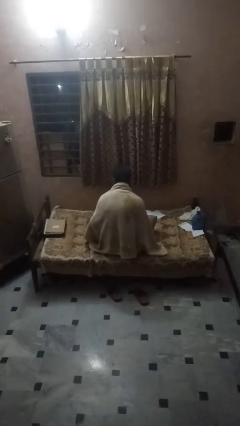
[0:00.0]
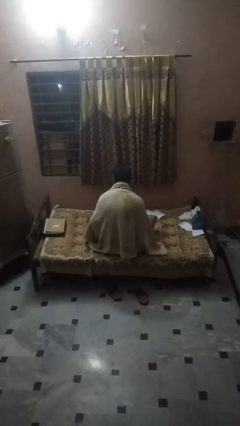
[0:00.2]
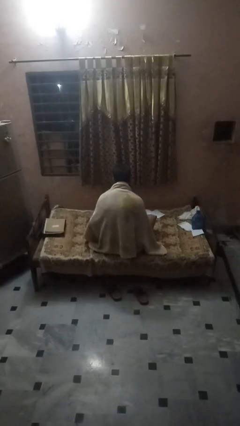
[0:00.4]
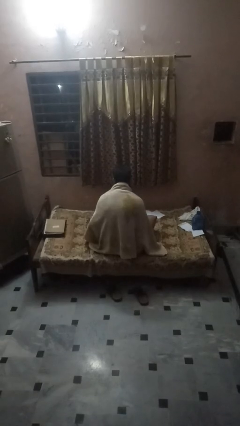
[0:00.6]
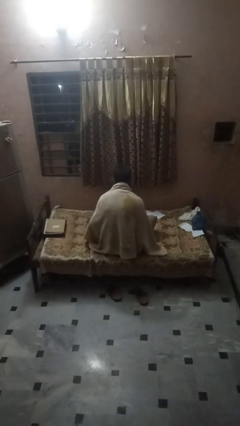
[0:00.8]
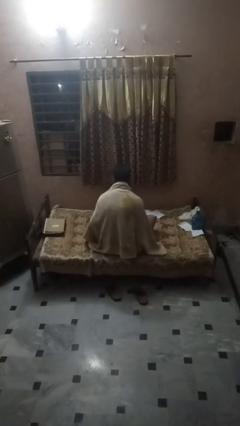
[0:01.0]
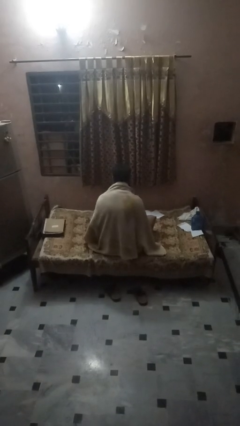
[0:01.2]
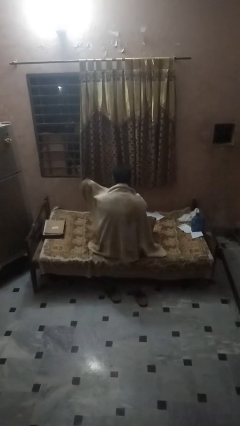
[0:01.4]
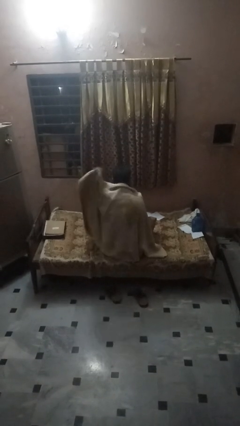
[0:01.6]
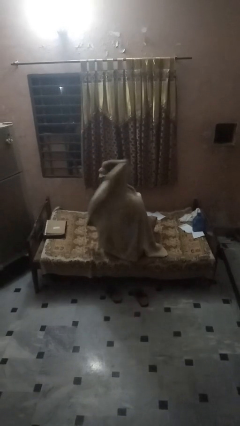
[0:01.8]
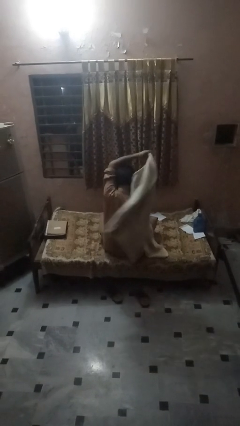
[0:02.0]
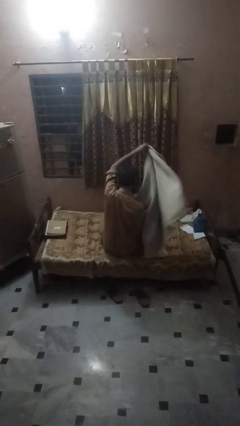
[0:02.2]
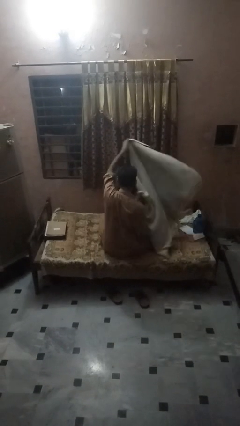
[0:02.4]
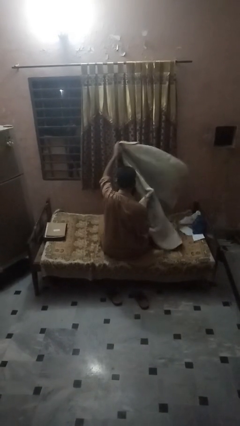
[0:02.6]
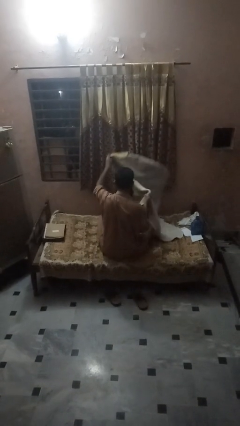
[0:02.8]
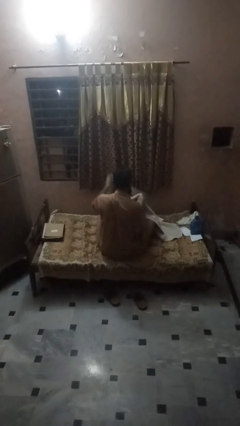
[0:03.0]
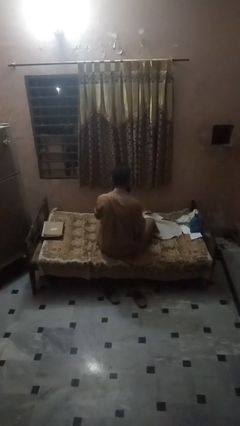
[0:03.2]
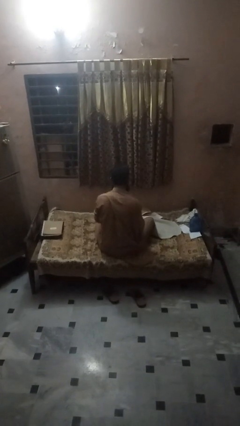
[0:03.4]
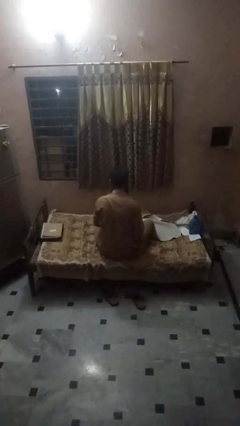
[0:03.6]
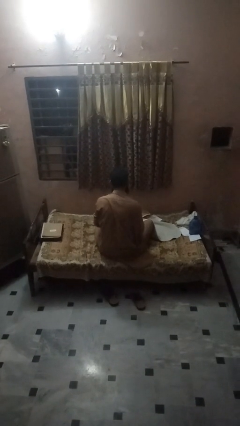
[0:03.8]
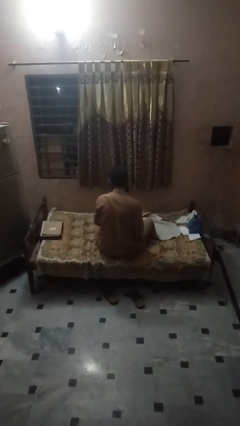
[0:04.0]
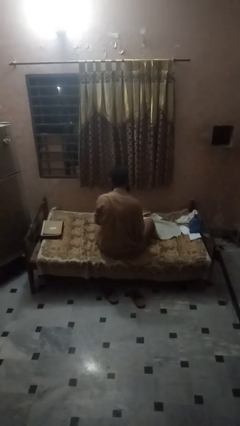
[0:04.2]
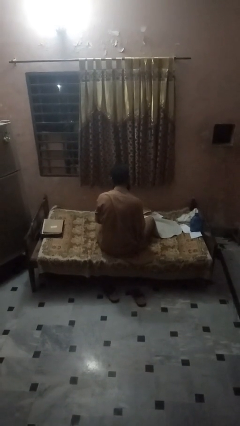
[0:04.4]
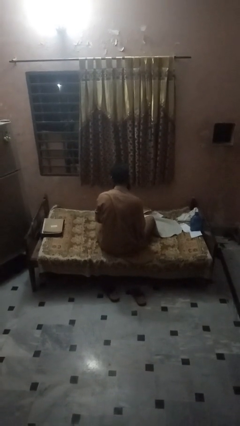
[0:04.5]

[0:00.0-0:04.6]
person uncovers with blanket

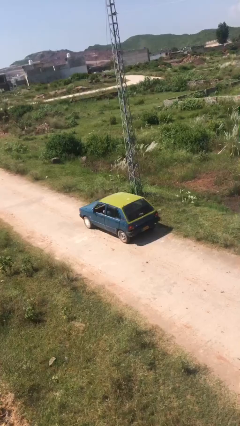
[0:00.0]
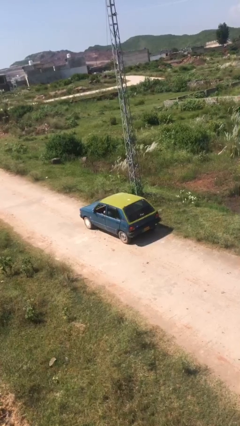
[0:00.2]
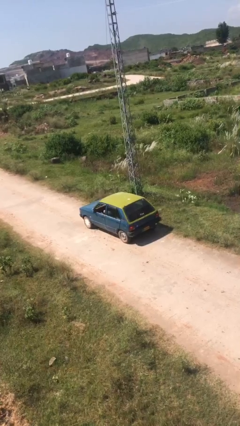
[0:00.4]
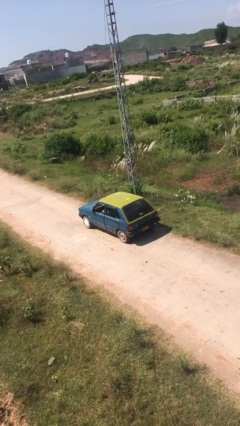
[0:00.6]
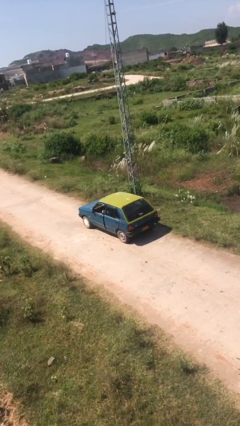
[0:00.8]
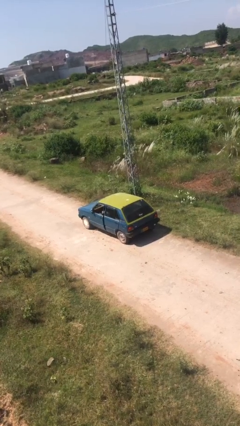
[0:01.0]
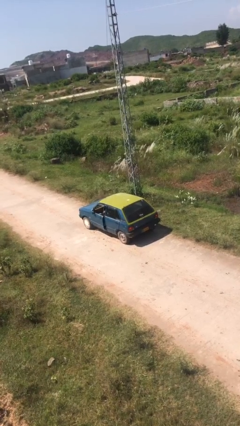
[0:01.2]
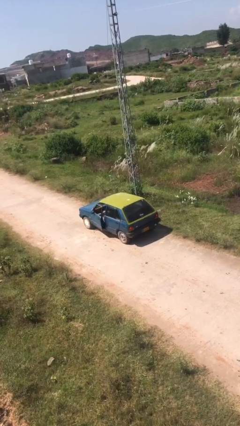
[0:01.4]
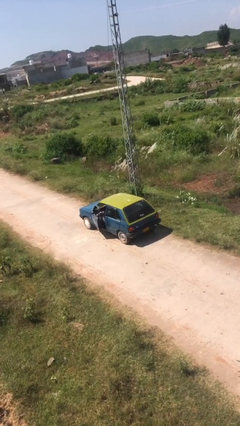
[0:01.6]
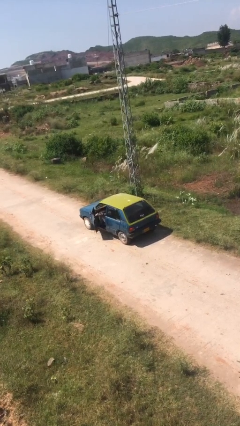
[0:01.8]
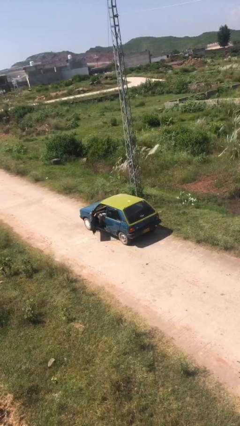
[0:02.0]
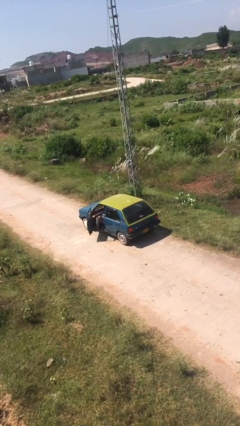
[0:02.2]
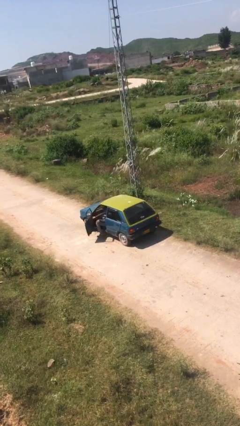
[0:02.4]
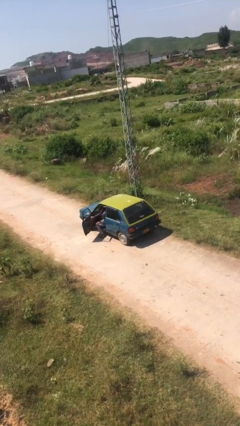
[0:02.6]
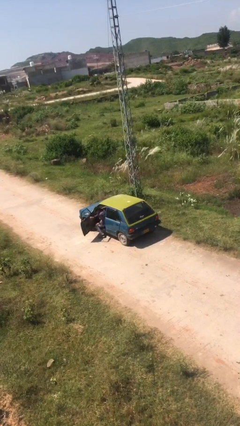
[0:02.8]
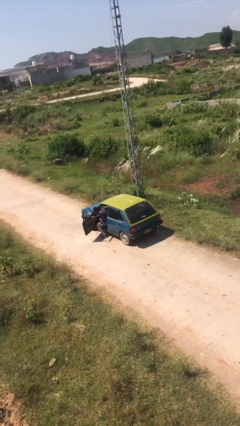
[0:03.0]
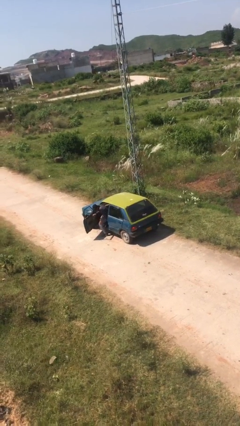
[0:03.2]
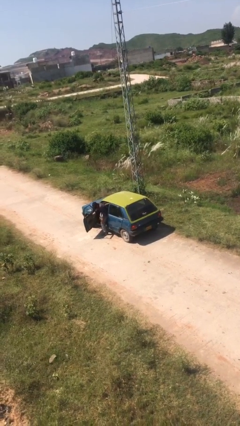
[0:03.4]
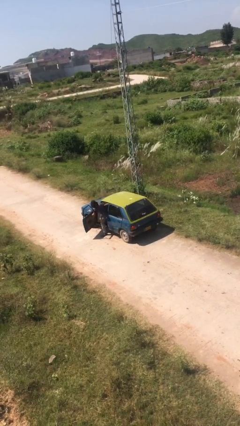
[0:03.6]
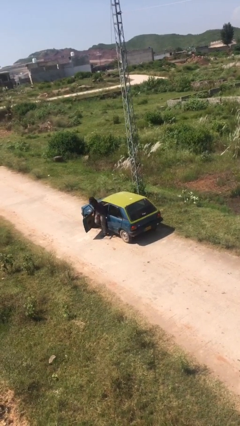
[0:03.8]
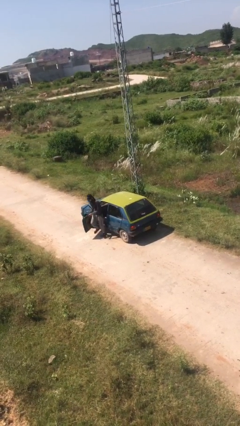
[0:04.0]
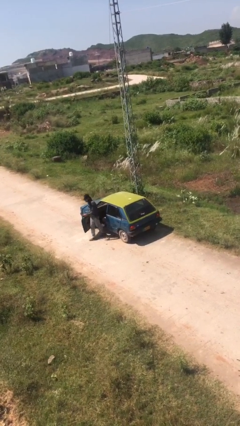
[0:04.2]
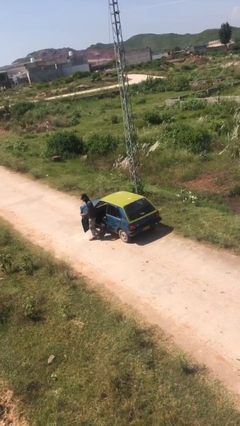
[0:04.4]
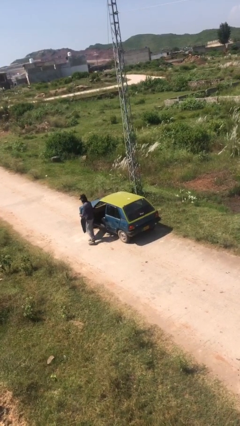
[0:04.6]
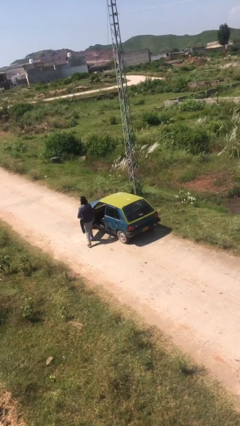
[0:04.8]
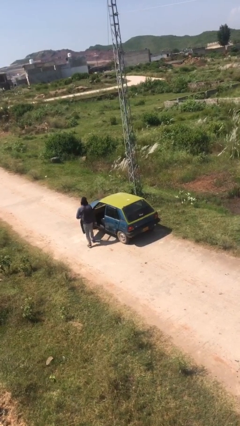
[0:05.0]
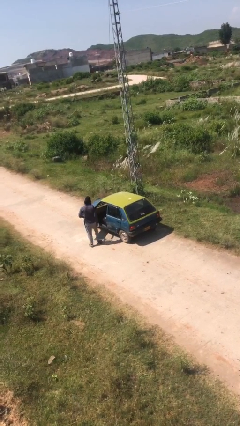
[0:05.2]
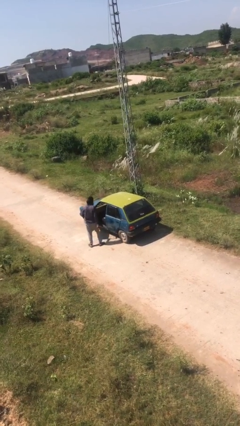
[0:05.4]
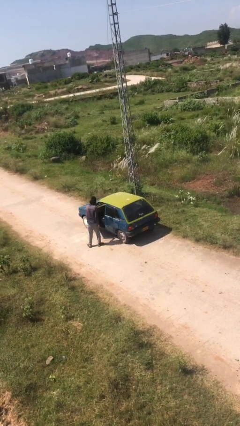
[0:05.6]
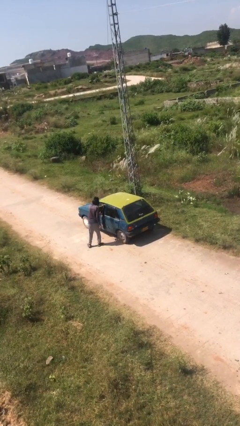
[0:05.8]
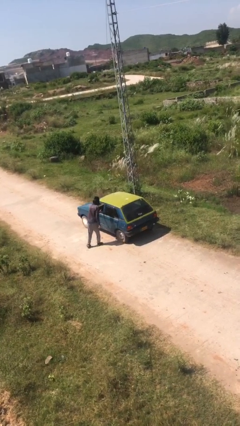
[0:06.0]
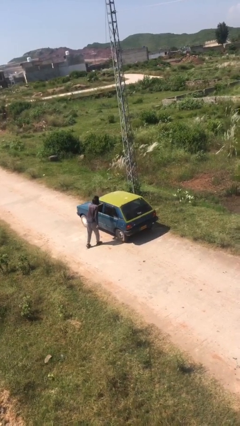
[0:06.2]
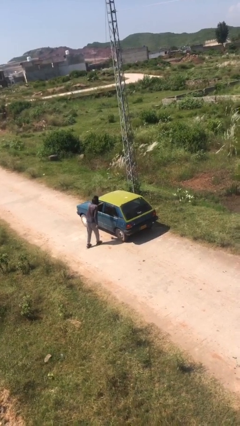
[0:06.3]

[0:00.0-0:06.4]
car drops off person

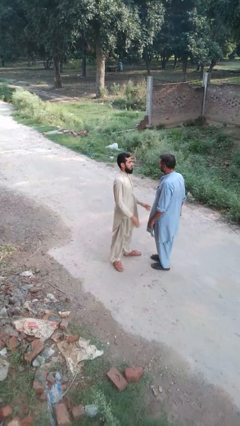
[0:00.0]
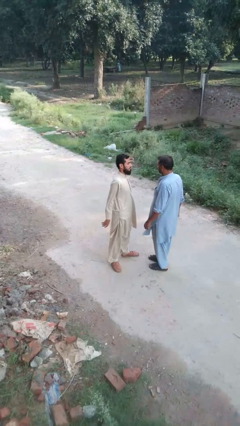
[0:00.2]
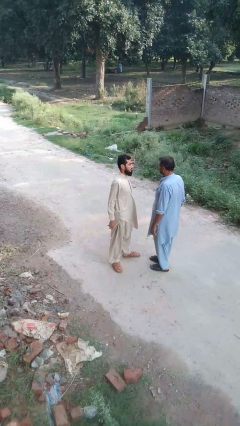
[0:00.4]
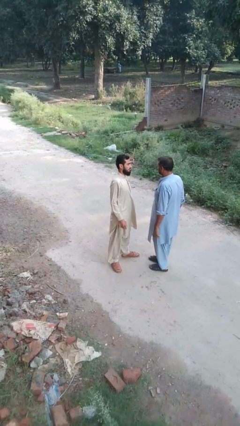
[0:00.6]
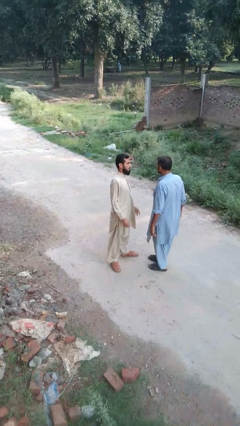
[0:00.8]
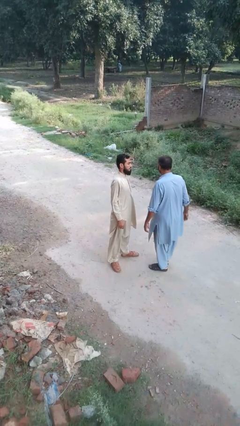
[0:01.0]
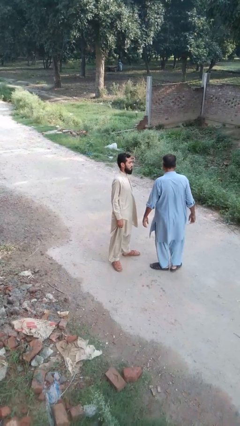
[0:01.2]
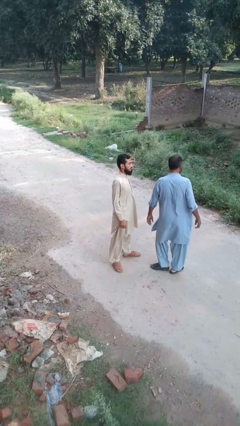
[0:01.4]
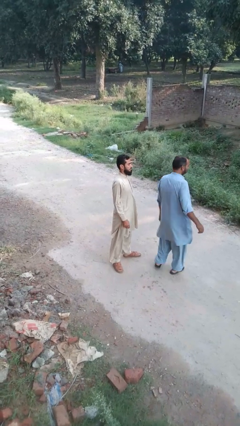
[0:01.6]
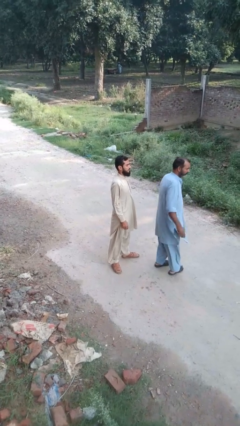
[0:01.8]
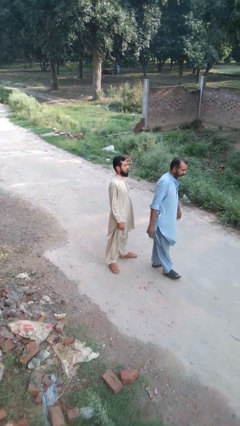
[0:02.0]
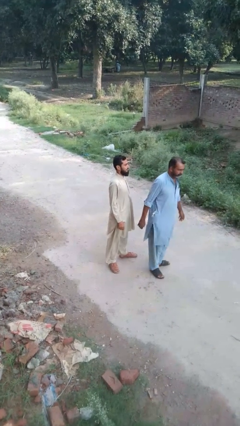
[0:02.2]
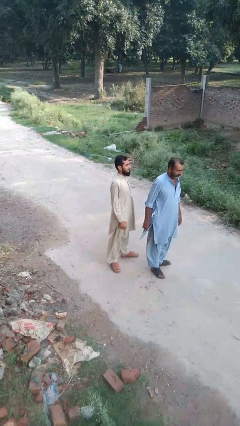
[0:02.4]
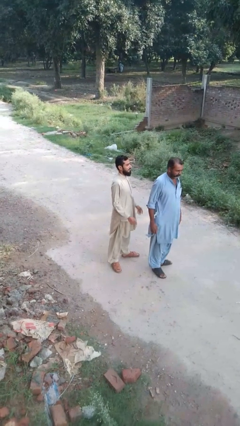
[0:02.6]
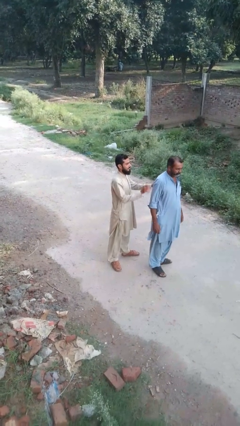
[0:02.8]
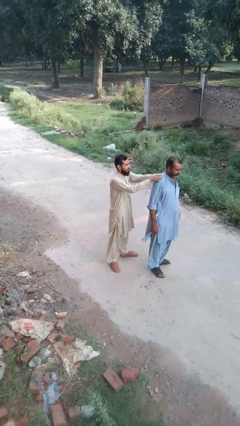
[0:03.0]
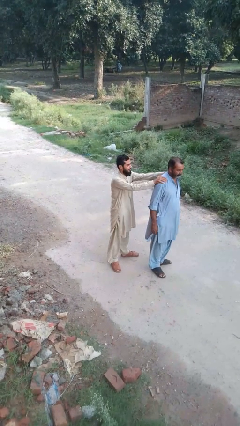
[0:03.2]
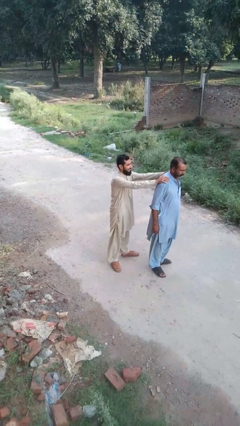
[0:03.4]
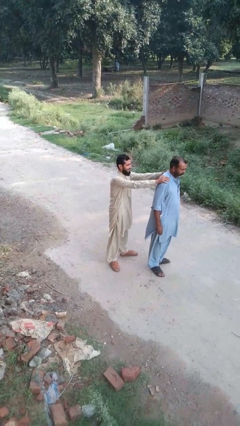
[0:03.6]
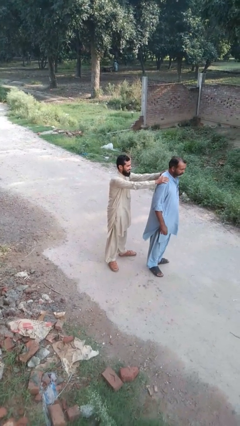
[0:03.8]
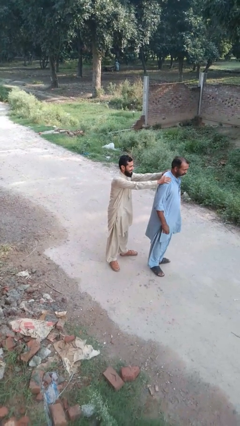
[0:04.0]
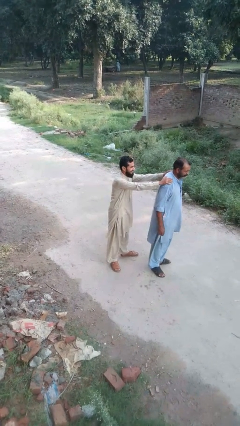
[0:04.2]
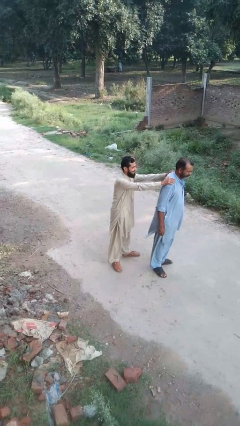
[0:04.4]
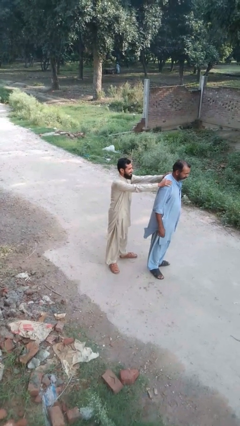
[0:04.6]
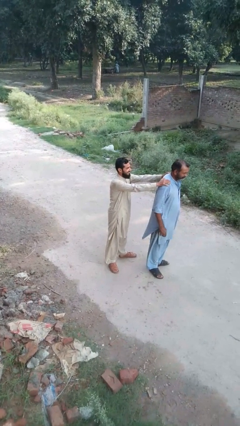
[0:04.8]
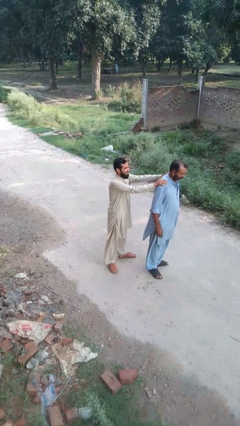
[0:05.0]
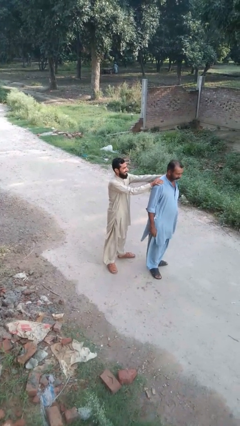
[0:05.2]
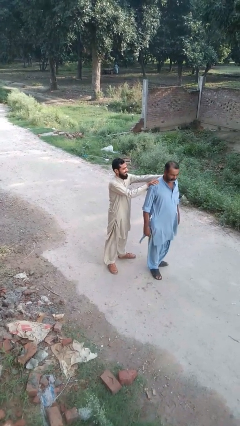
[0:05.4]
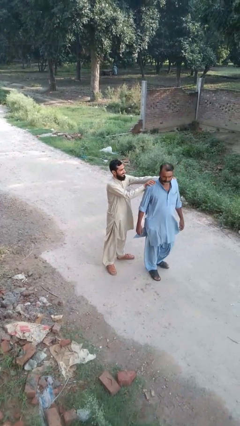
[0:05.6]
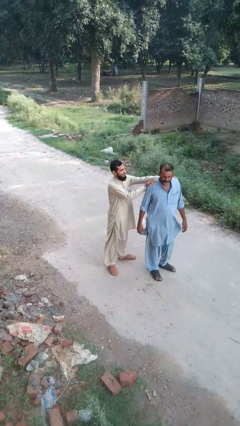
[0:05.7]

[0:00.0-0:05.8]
person grabs person by shoulder

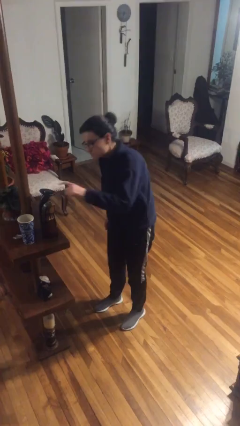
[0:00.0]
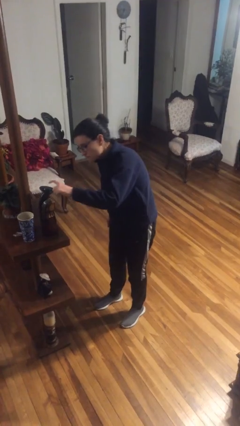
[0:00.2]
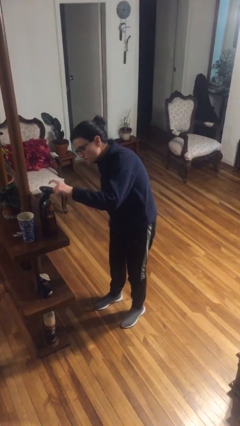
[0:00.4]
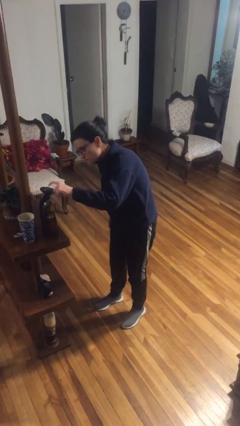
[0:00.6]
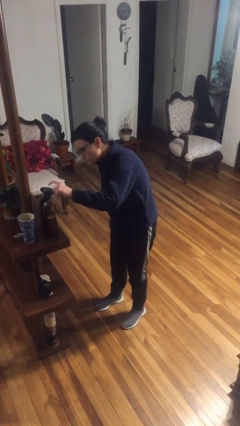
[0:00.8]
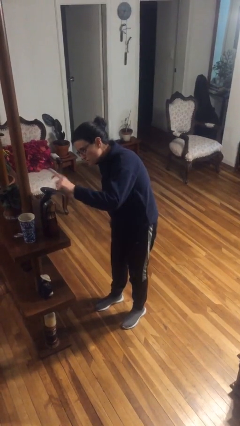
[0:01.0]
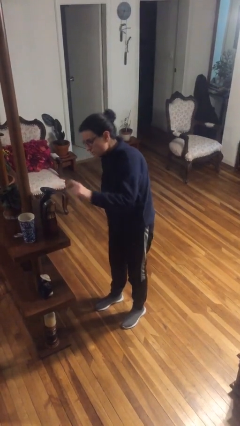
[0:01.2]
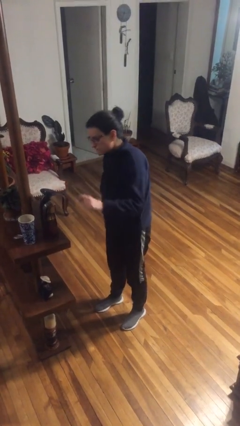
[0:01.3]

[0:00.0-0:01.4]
person taps object with finger
